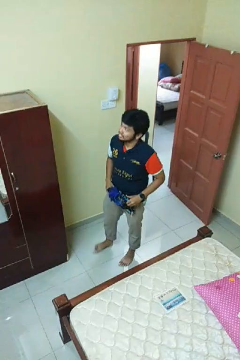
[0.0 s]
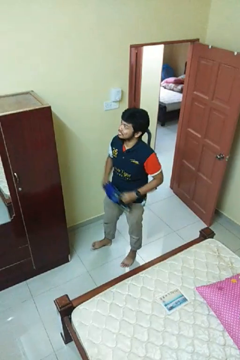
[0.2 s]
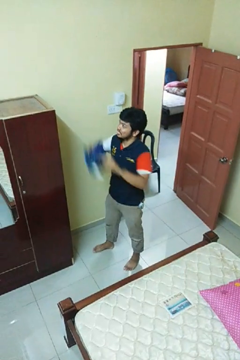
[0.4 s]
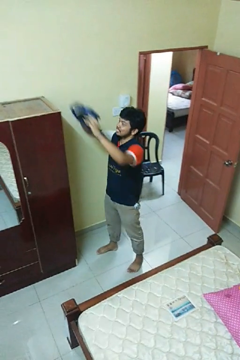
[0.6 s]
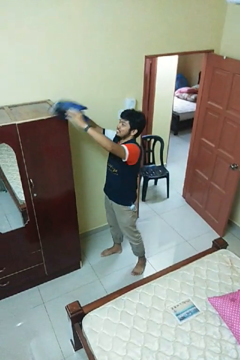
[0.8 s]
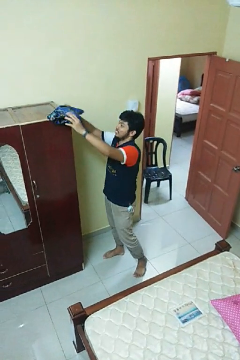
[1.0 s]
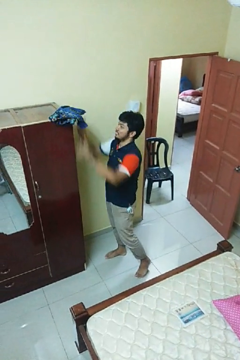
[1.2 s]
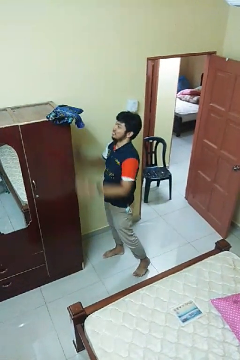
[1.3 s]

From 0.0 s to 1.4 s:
person puts down object on countertop

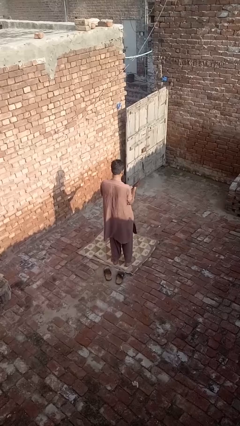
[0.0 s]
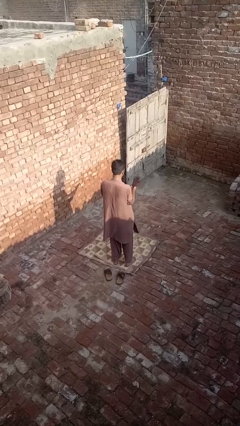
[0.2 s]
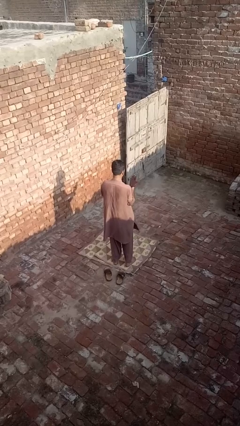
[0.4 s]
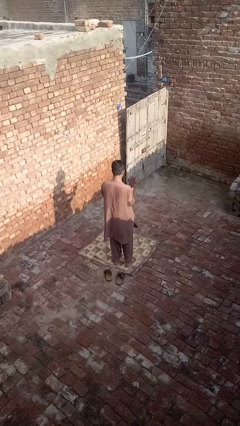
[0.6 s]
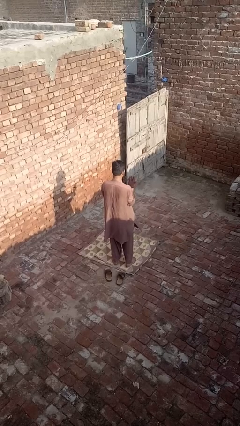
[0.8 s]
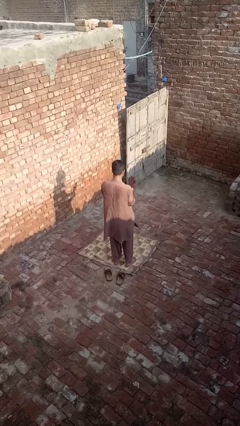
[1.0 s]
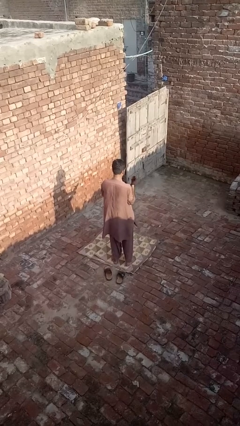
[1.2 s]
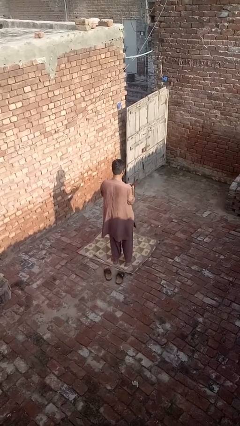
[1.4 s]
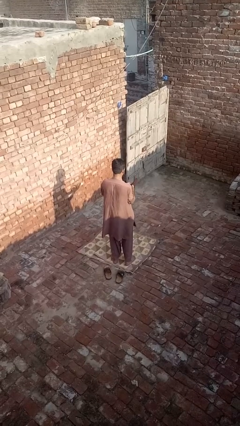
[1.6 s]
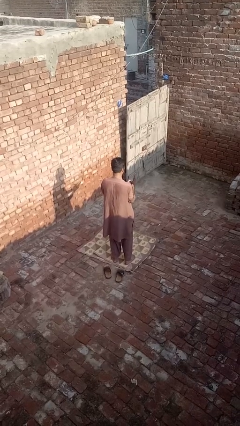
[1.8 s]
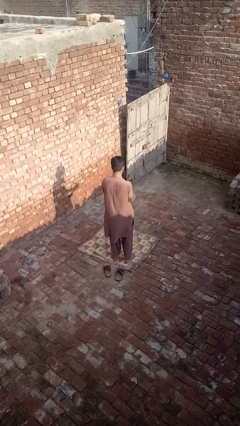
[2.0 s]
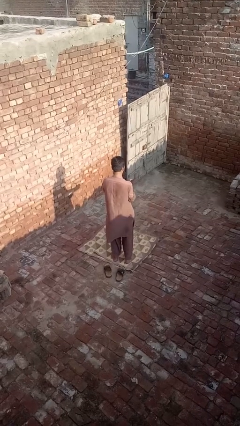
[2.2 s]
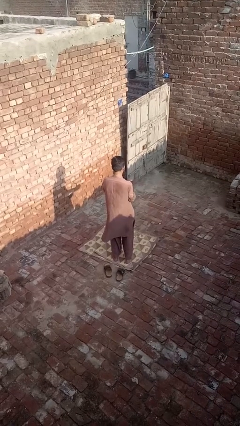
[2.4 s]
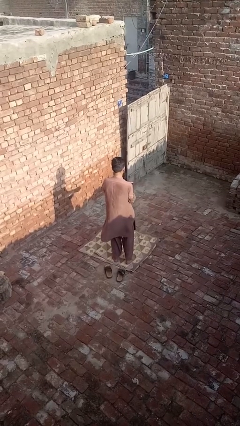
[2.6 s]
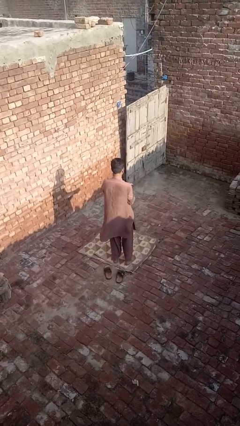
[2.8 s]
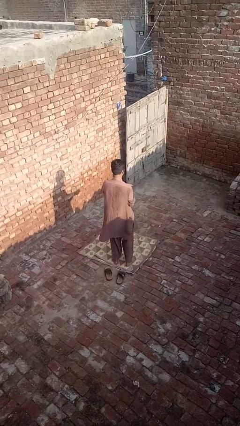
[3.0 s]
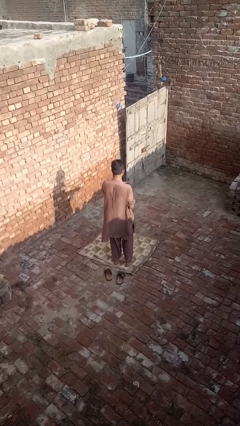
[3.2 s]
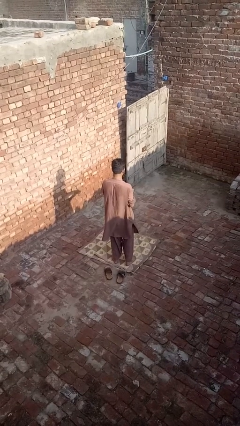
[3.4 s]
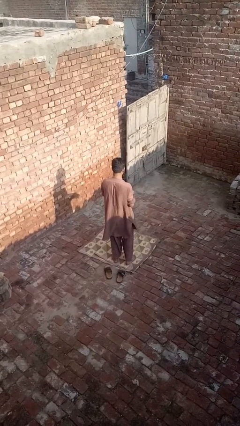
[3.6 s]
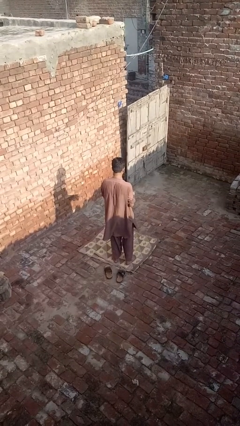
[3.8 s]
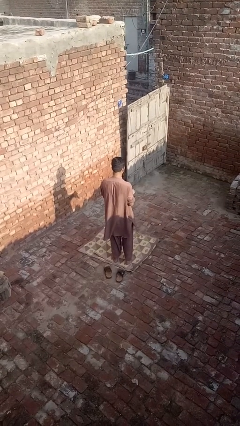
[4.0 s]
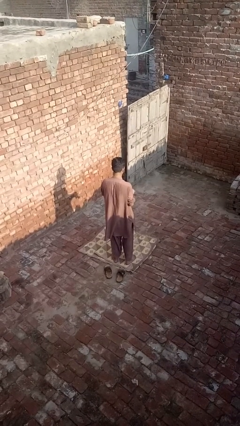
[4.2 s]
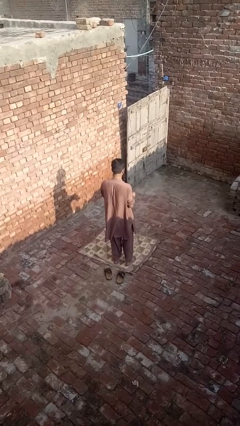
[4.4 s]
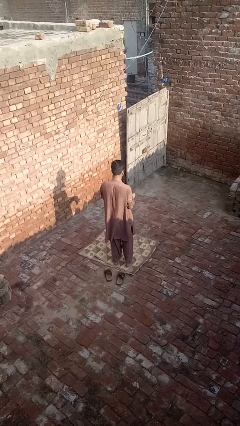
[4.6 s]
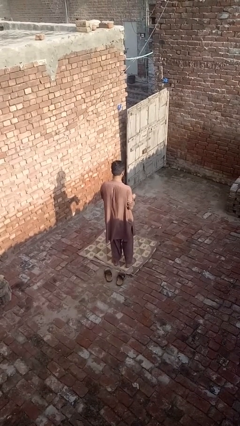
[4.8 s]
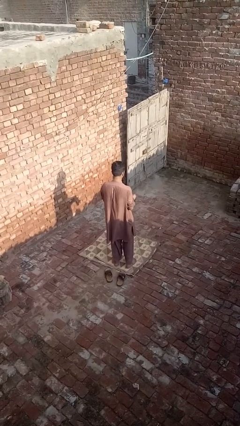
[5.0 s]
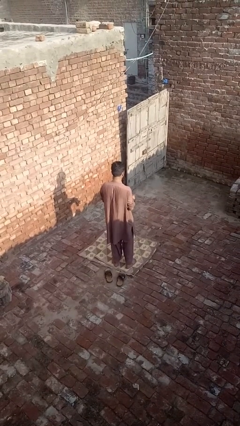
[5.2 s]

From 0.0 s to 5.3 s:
person takes off gloves

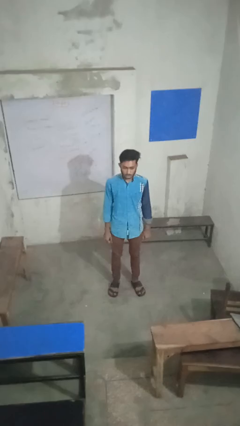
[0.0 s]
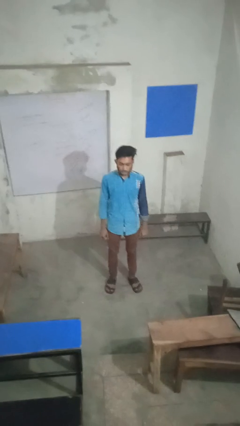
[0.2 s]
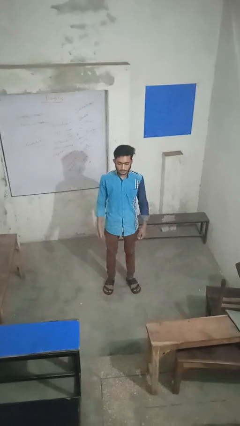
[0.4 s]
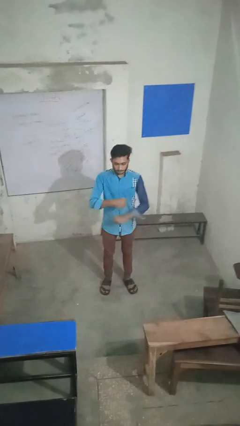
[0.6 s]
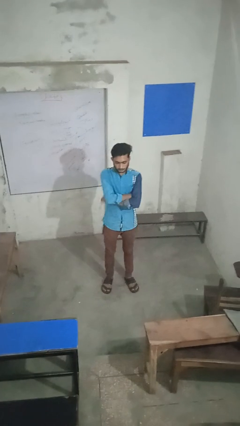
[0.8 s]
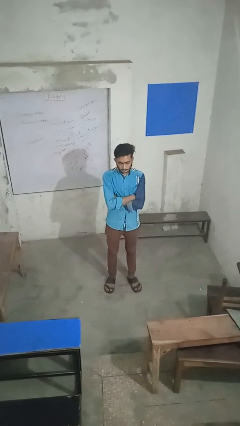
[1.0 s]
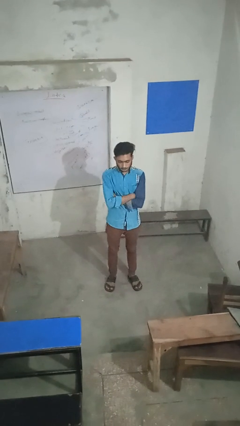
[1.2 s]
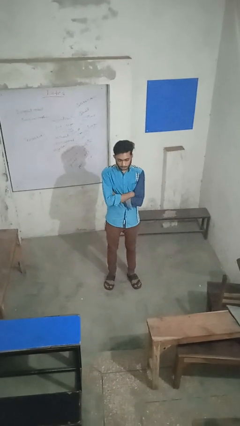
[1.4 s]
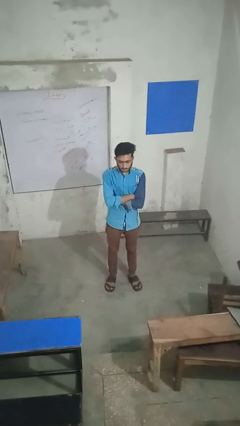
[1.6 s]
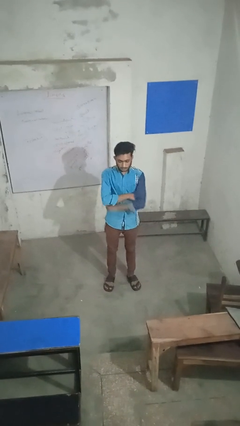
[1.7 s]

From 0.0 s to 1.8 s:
person crosses arms

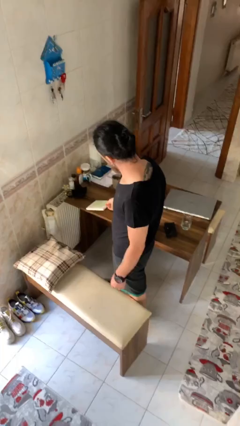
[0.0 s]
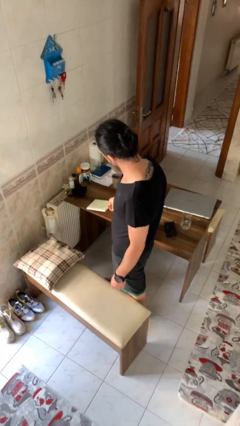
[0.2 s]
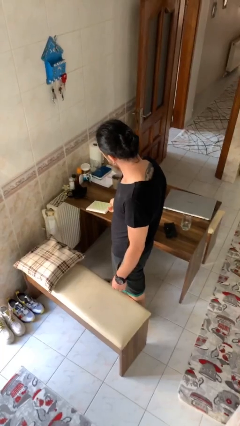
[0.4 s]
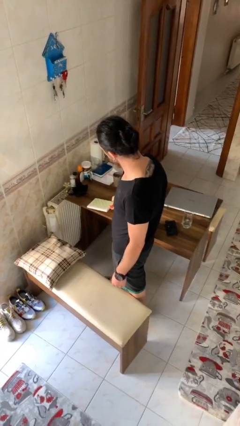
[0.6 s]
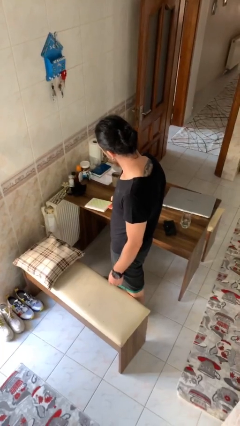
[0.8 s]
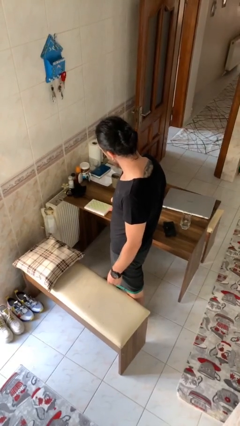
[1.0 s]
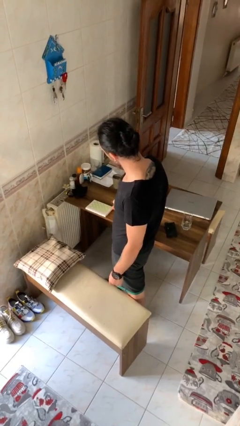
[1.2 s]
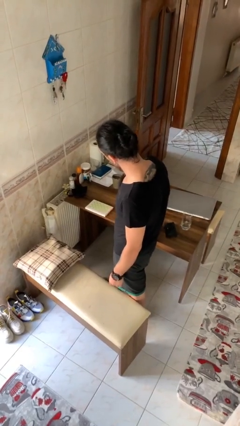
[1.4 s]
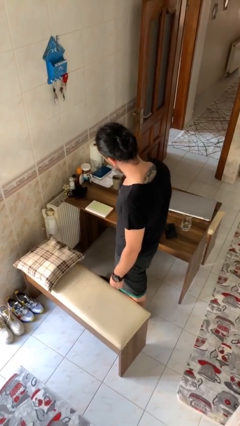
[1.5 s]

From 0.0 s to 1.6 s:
person puts down object on table

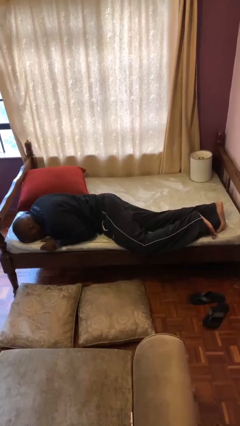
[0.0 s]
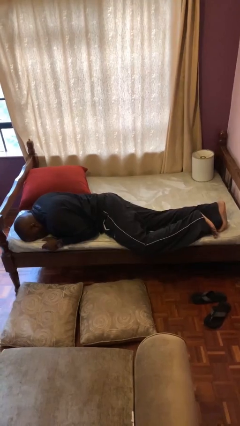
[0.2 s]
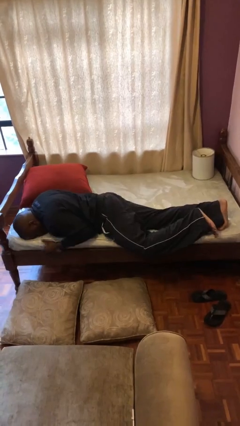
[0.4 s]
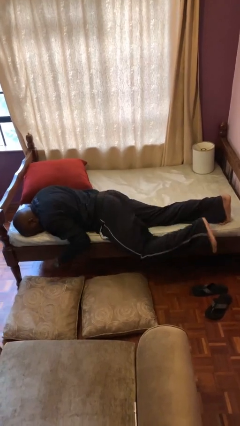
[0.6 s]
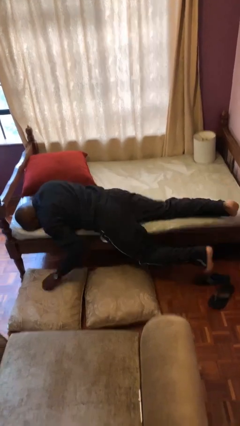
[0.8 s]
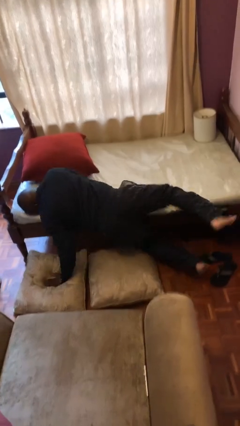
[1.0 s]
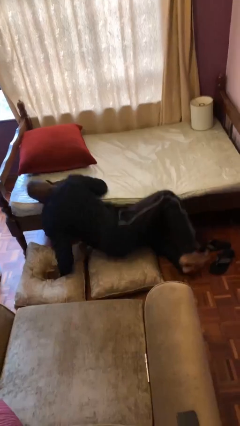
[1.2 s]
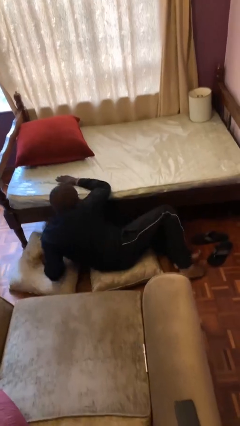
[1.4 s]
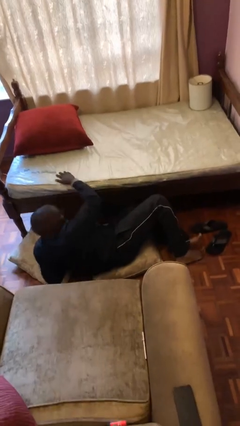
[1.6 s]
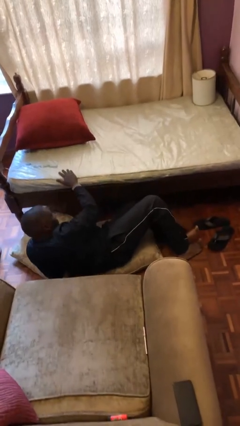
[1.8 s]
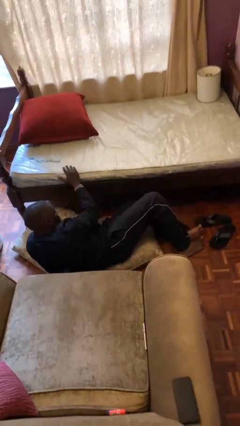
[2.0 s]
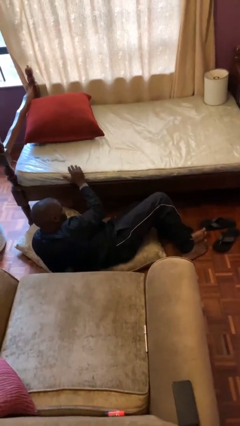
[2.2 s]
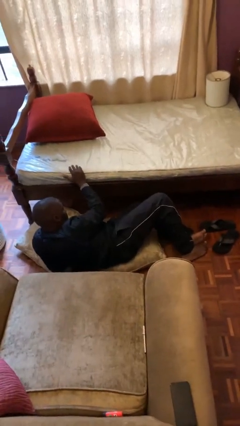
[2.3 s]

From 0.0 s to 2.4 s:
person falls from bed

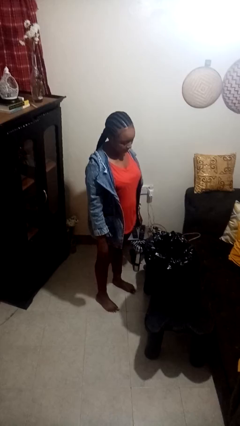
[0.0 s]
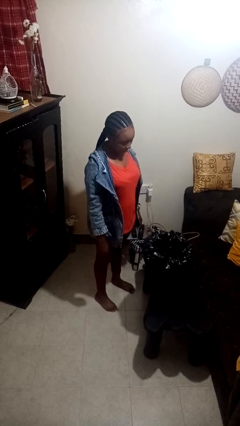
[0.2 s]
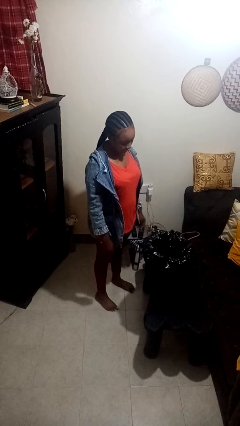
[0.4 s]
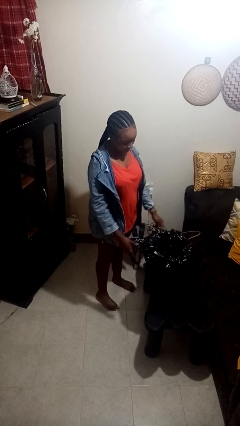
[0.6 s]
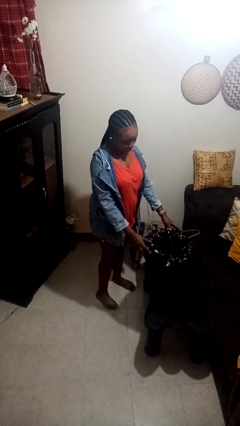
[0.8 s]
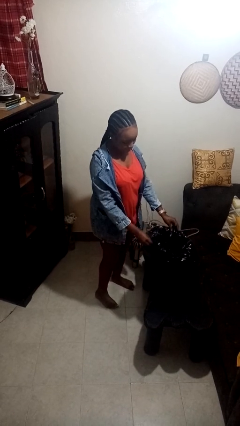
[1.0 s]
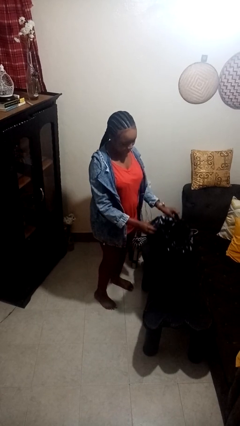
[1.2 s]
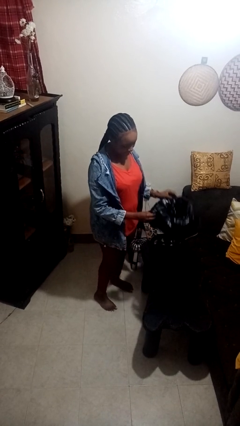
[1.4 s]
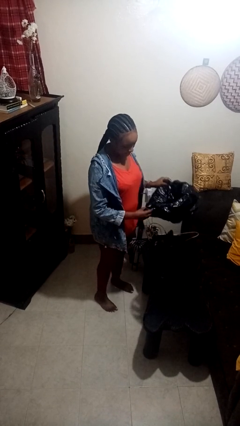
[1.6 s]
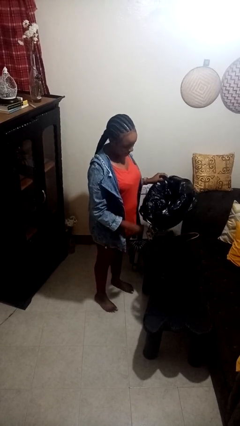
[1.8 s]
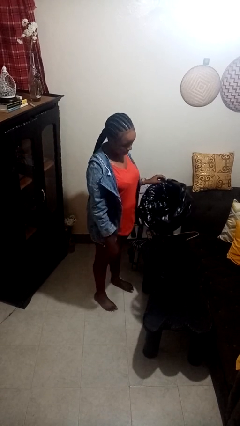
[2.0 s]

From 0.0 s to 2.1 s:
person removes trashbag from trashcan

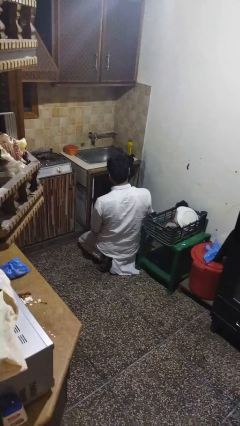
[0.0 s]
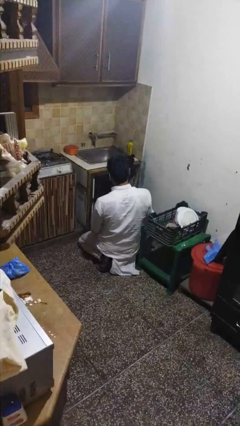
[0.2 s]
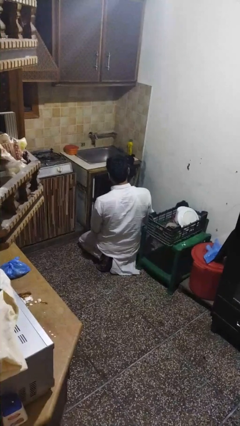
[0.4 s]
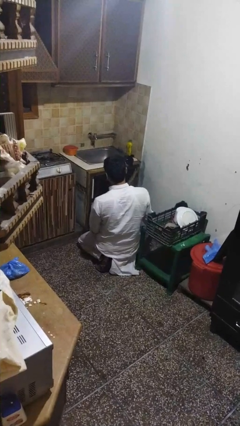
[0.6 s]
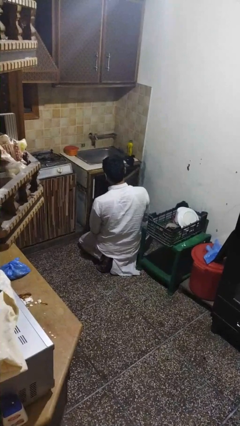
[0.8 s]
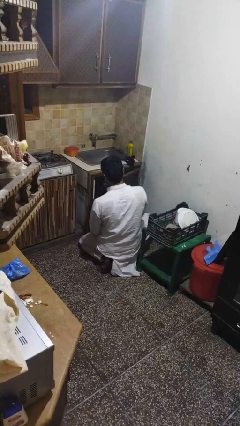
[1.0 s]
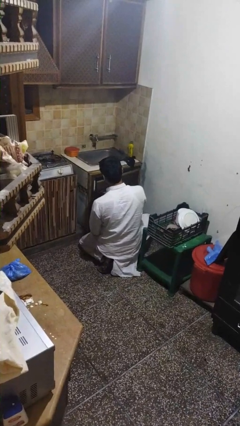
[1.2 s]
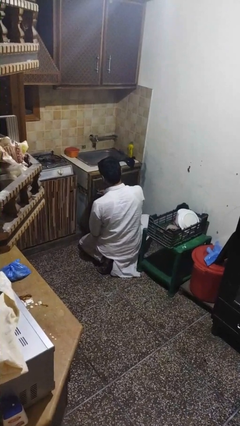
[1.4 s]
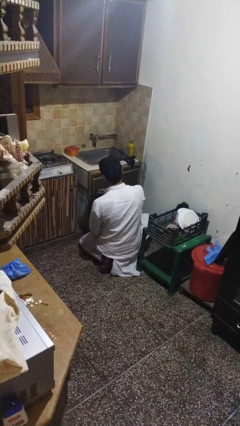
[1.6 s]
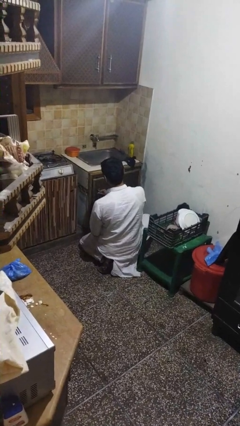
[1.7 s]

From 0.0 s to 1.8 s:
person closes cabinet

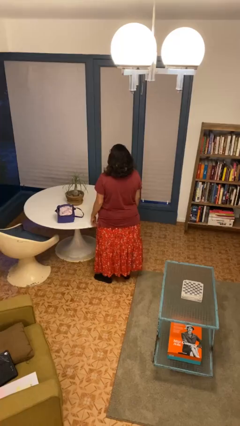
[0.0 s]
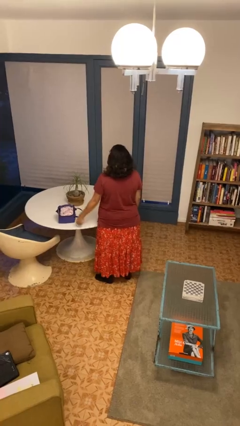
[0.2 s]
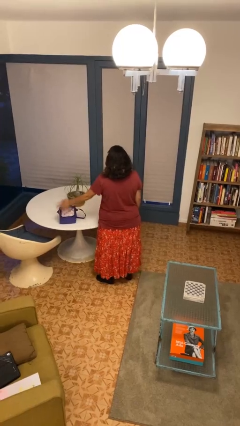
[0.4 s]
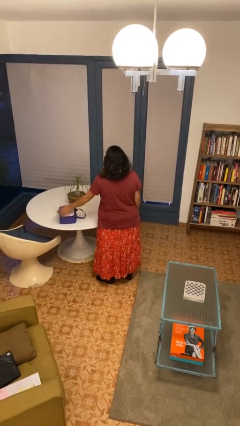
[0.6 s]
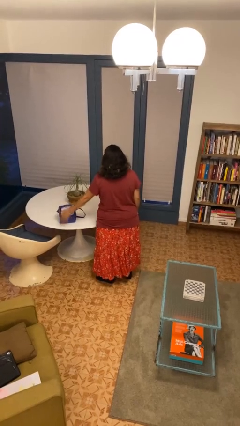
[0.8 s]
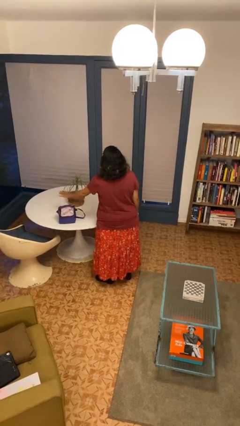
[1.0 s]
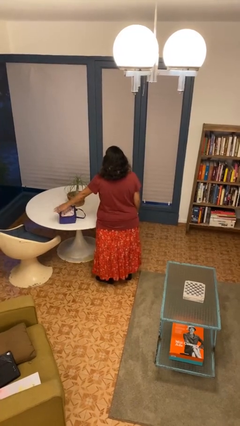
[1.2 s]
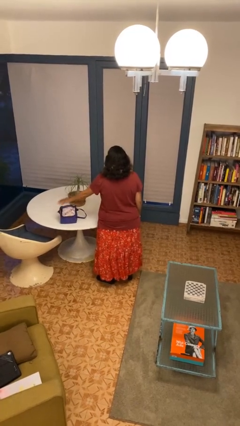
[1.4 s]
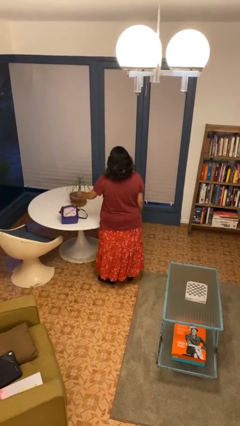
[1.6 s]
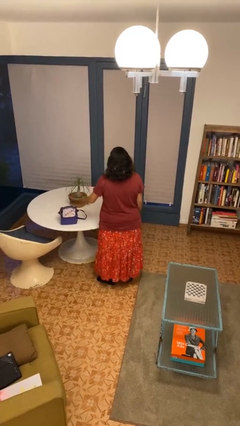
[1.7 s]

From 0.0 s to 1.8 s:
person waves hand over object
